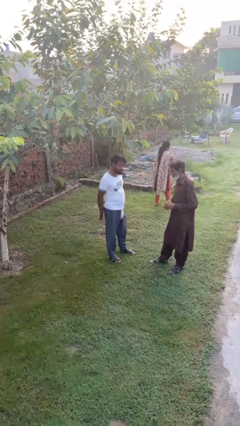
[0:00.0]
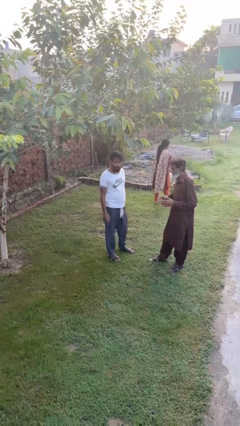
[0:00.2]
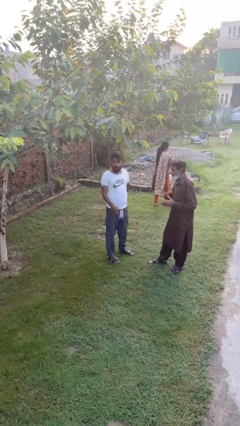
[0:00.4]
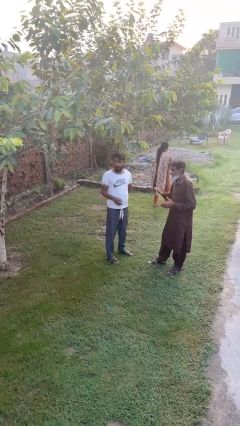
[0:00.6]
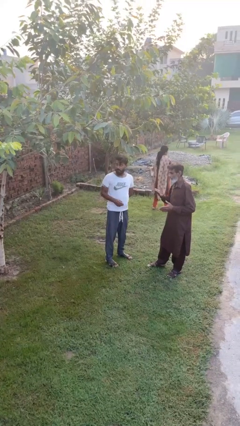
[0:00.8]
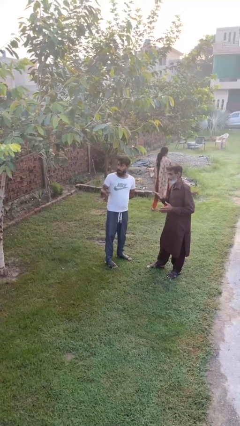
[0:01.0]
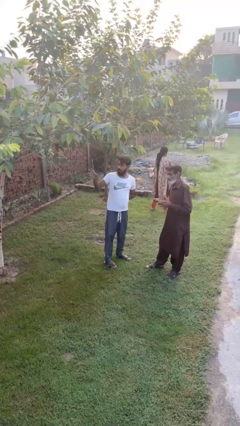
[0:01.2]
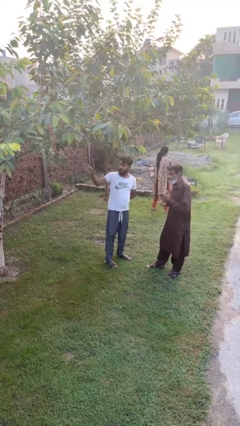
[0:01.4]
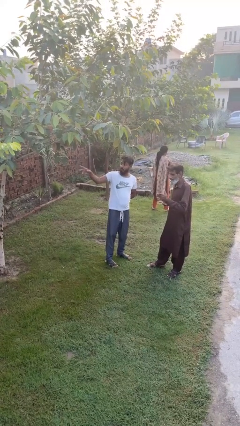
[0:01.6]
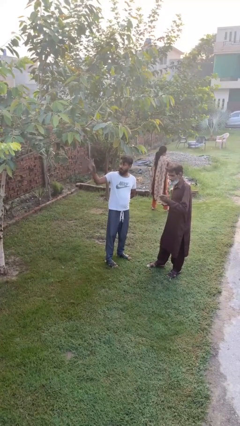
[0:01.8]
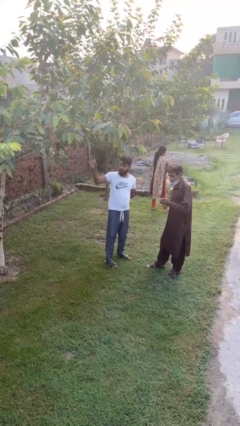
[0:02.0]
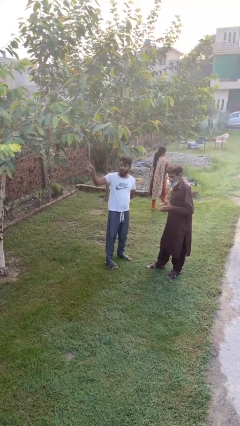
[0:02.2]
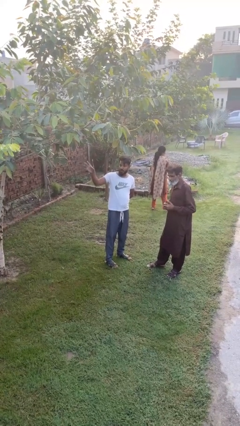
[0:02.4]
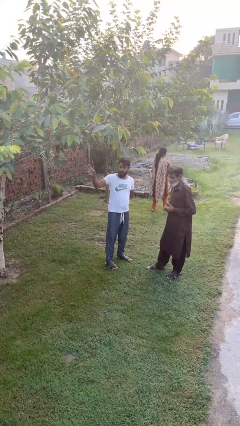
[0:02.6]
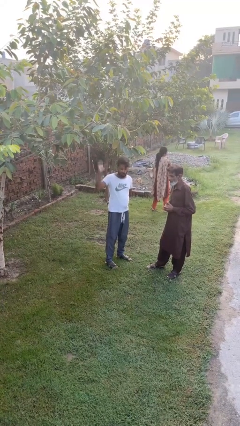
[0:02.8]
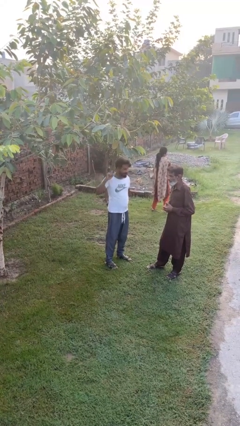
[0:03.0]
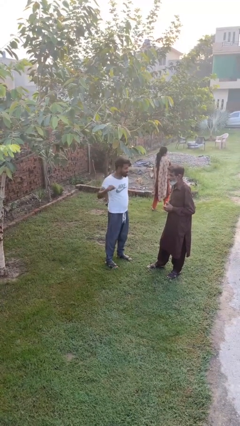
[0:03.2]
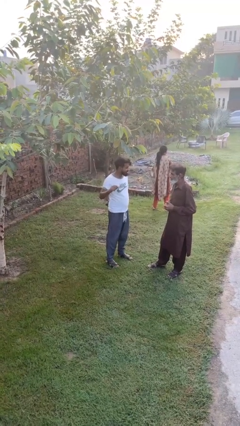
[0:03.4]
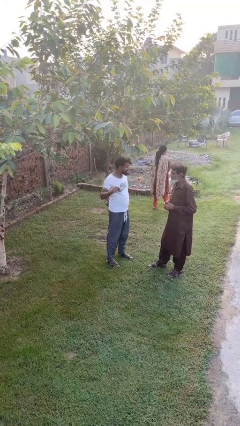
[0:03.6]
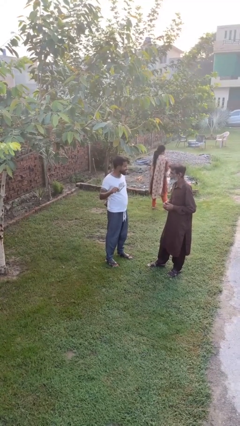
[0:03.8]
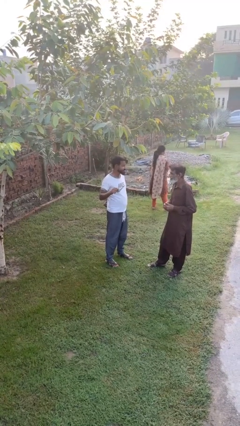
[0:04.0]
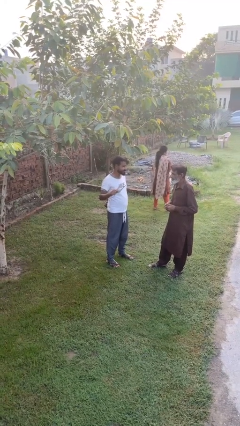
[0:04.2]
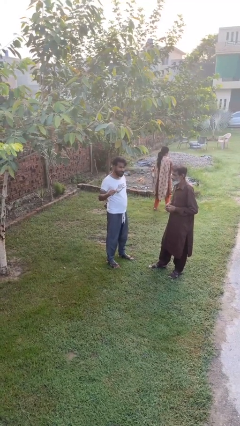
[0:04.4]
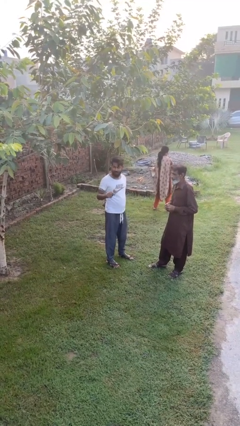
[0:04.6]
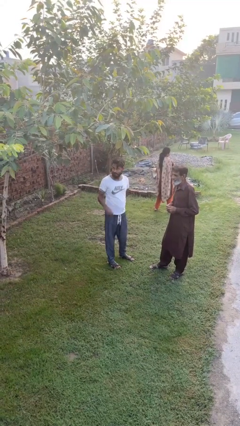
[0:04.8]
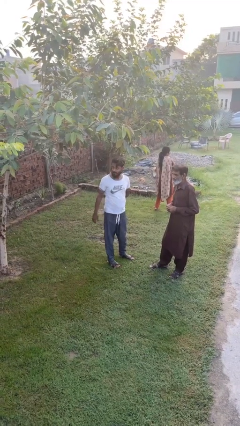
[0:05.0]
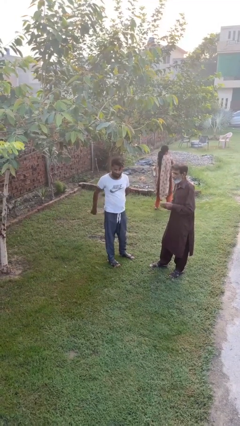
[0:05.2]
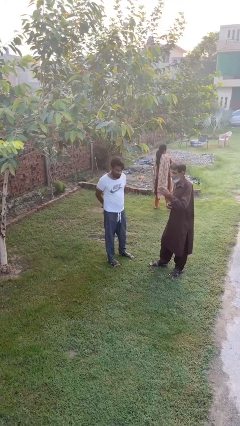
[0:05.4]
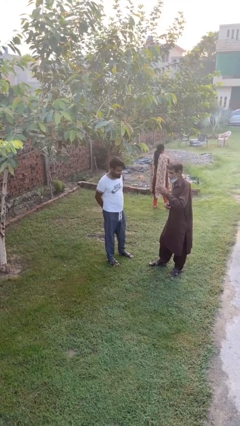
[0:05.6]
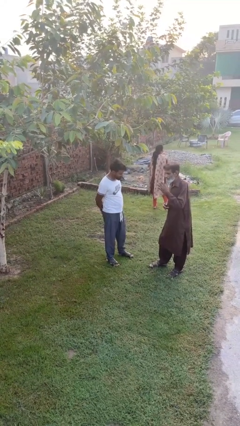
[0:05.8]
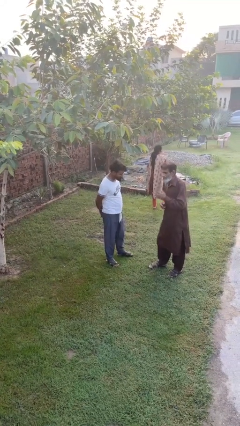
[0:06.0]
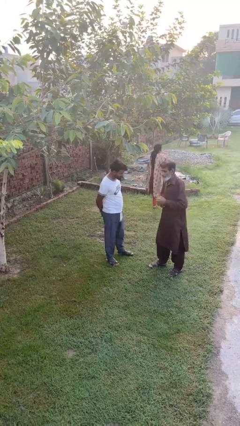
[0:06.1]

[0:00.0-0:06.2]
person talks to person

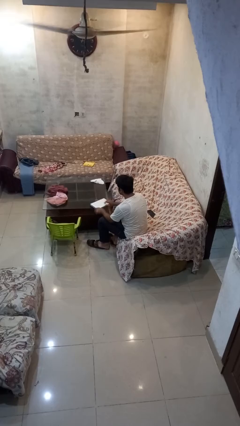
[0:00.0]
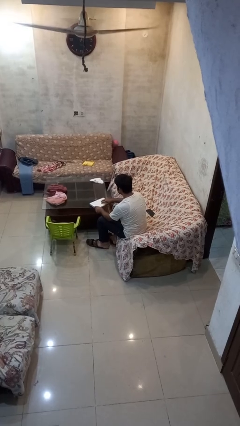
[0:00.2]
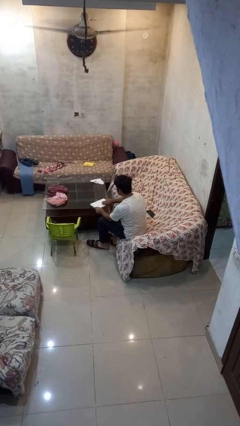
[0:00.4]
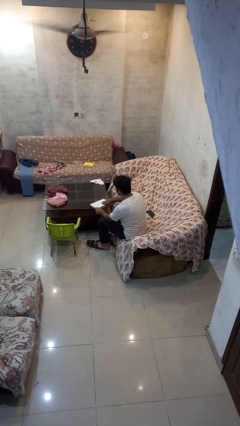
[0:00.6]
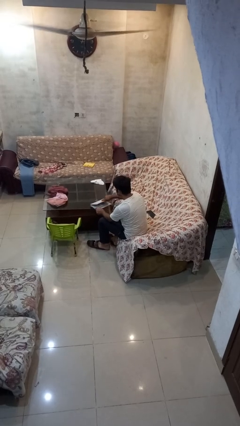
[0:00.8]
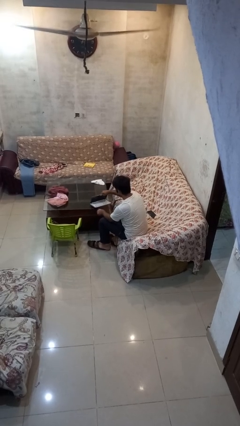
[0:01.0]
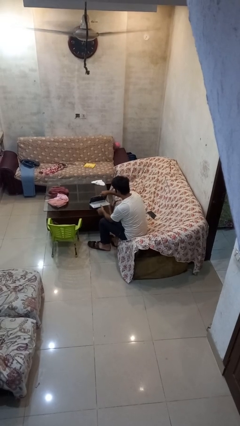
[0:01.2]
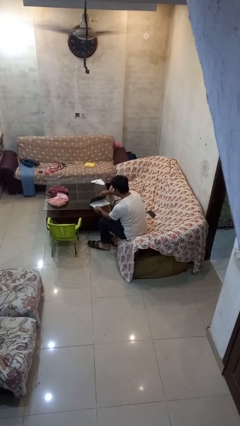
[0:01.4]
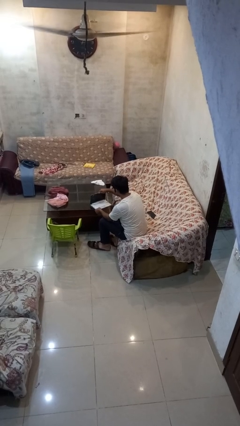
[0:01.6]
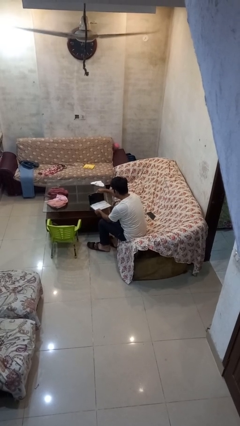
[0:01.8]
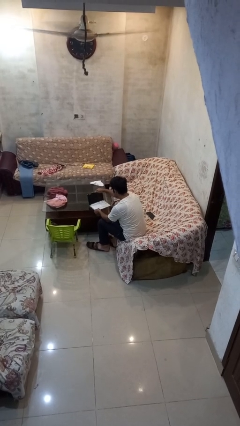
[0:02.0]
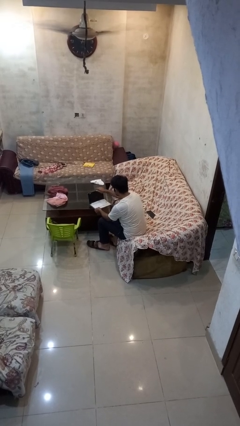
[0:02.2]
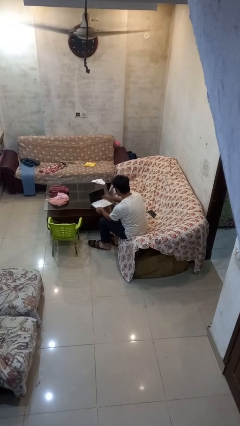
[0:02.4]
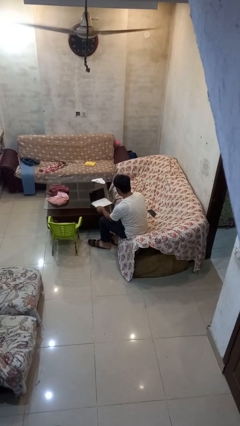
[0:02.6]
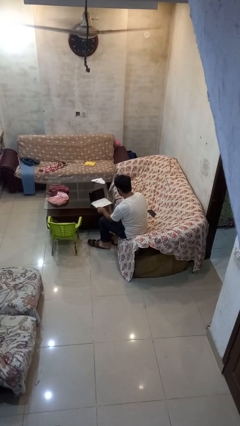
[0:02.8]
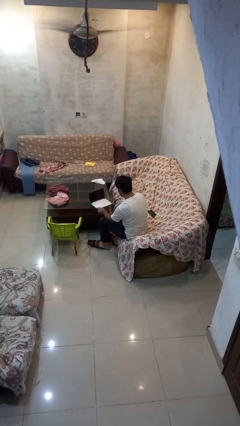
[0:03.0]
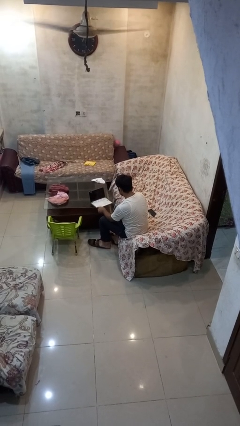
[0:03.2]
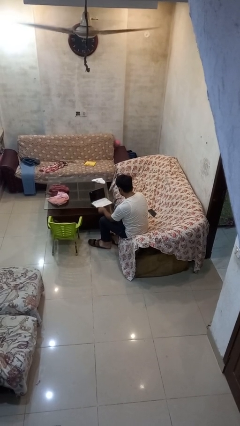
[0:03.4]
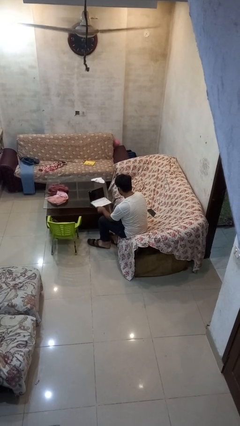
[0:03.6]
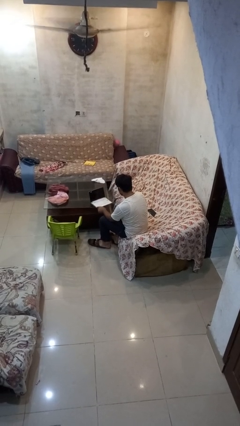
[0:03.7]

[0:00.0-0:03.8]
person opens laptop

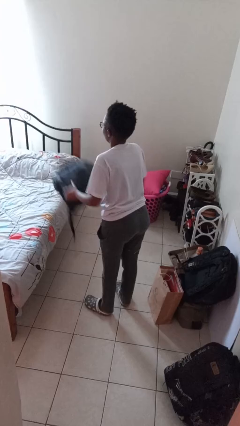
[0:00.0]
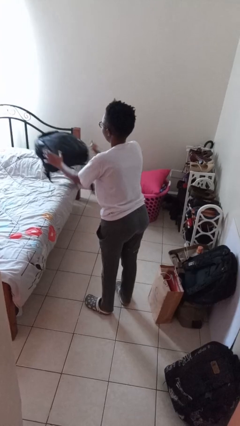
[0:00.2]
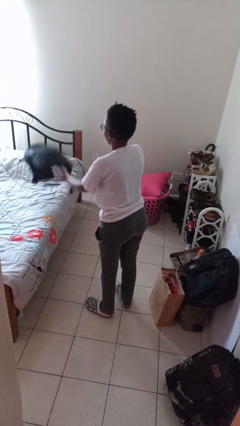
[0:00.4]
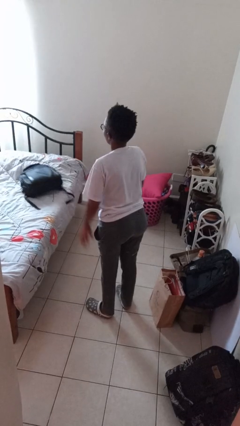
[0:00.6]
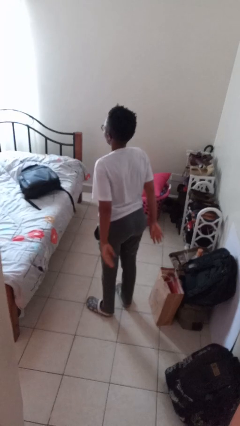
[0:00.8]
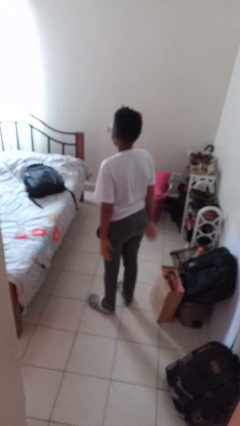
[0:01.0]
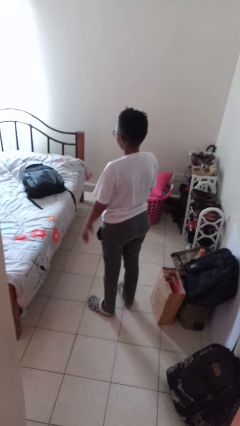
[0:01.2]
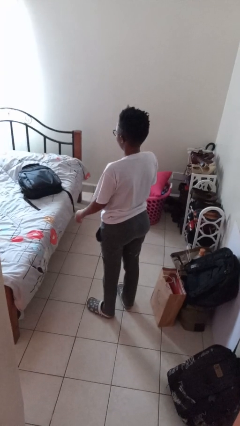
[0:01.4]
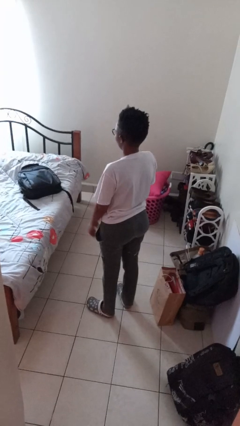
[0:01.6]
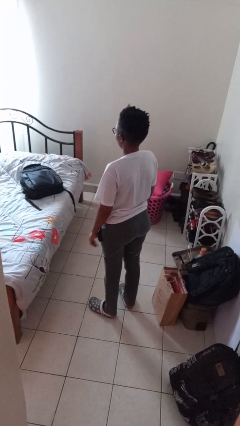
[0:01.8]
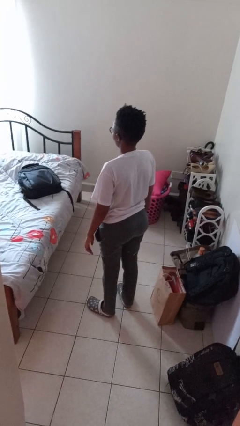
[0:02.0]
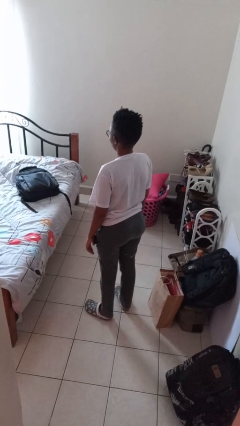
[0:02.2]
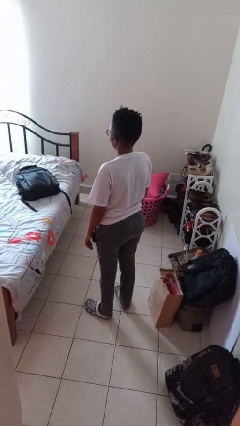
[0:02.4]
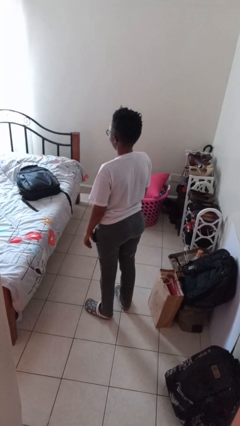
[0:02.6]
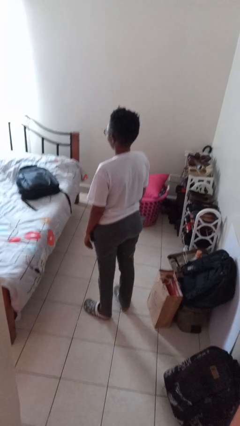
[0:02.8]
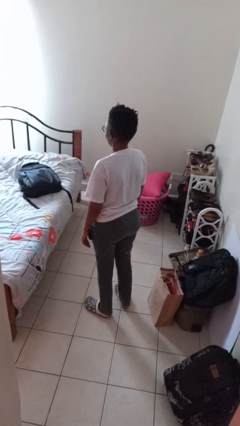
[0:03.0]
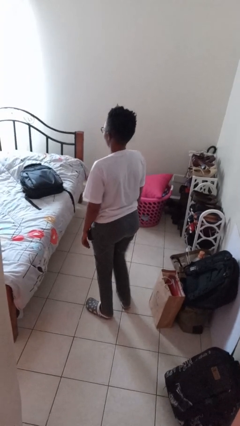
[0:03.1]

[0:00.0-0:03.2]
person throws object on bed

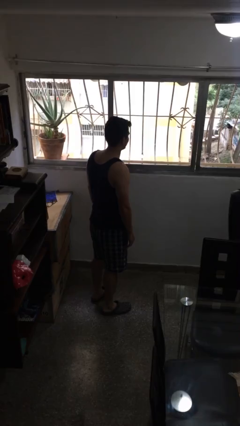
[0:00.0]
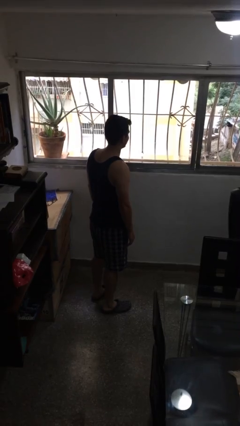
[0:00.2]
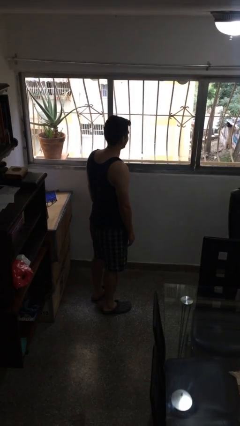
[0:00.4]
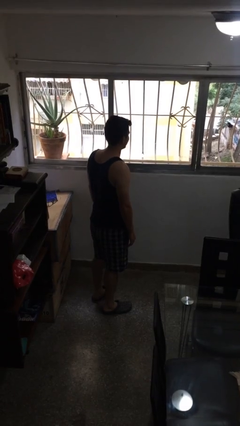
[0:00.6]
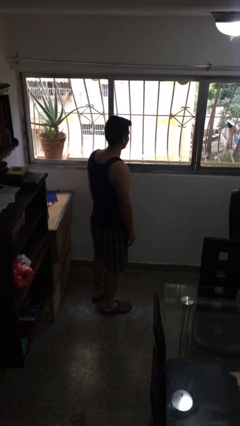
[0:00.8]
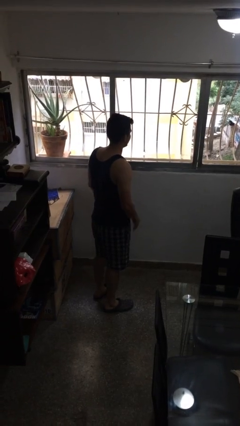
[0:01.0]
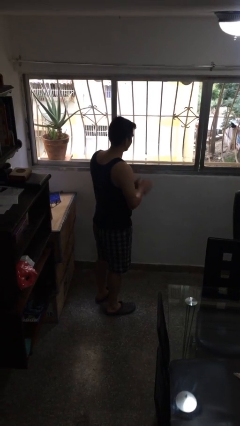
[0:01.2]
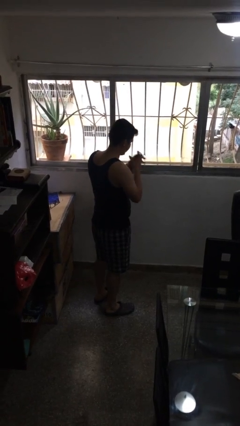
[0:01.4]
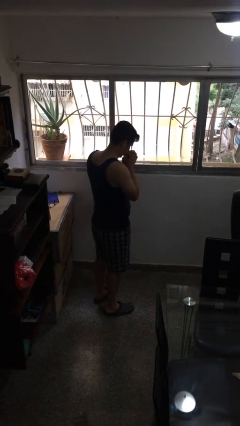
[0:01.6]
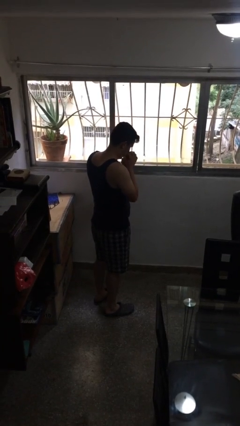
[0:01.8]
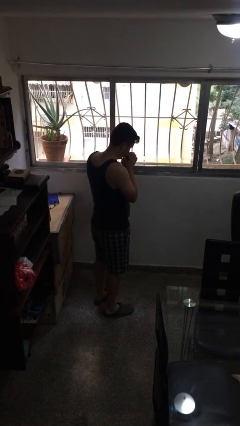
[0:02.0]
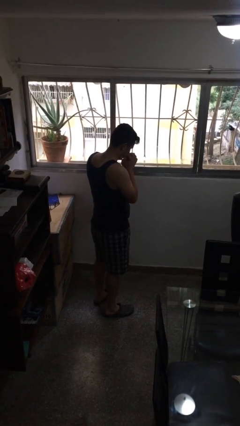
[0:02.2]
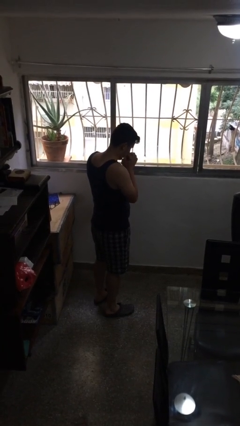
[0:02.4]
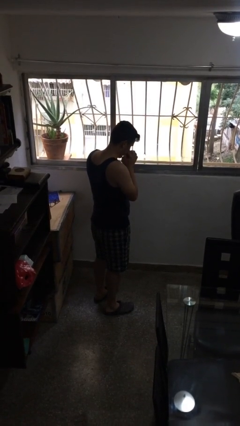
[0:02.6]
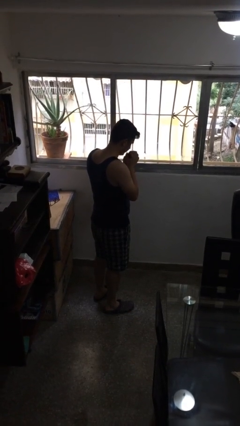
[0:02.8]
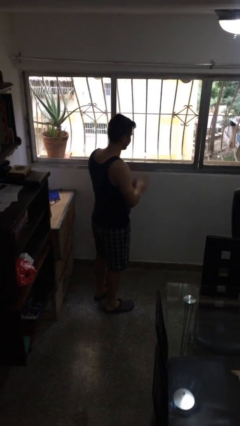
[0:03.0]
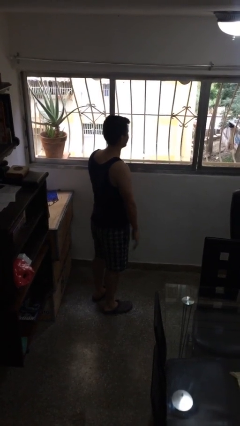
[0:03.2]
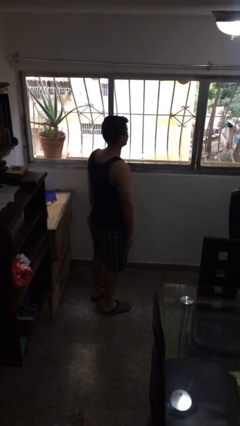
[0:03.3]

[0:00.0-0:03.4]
person prays

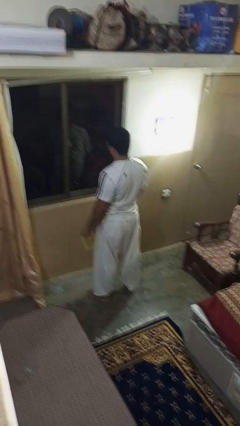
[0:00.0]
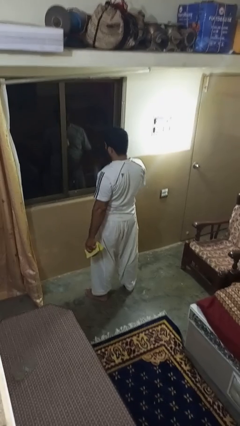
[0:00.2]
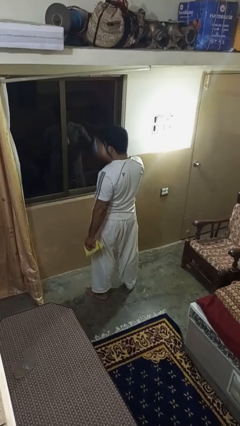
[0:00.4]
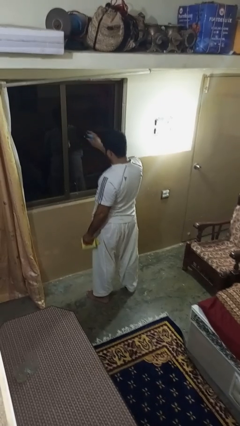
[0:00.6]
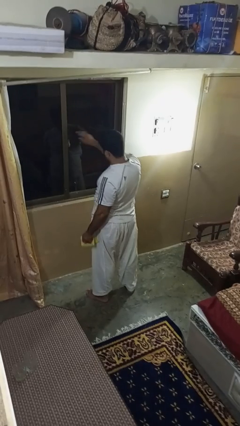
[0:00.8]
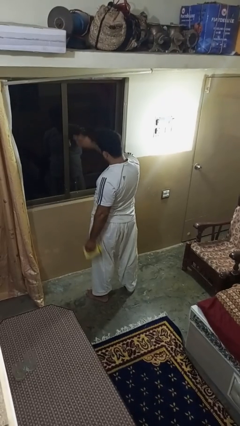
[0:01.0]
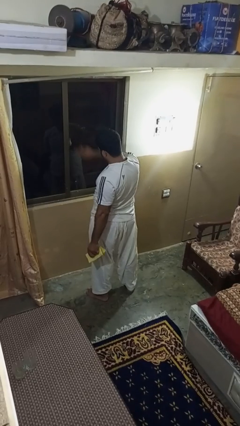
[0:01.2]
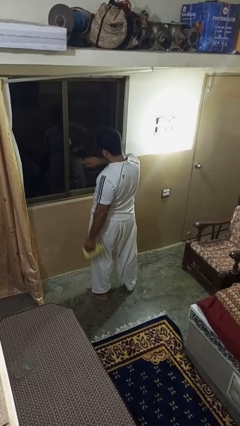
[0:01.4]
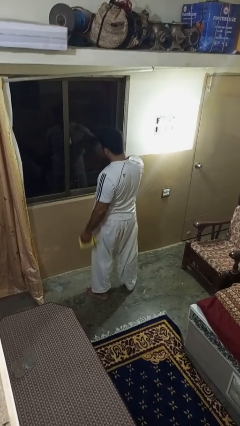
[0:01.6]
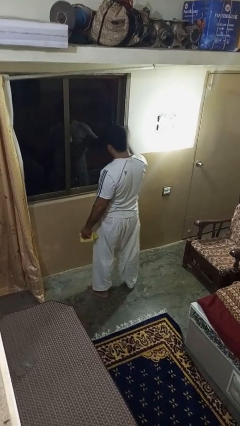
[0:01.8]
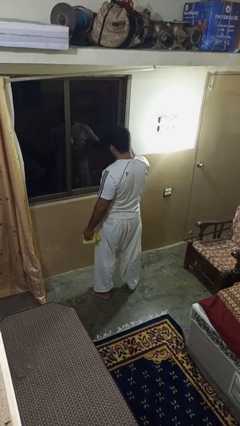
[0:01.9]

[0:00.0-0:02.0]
person sprays from bottle
